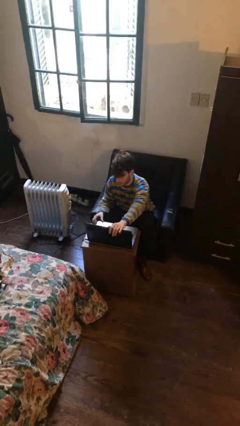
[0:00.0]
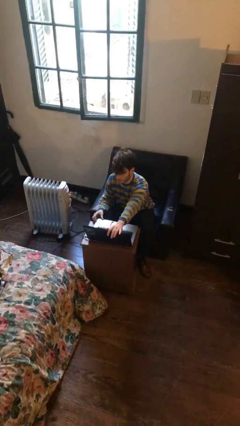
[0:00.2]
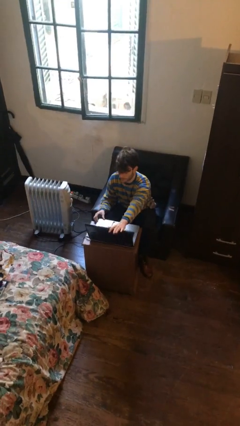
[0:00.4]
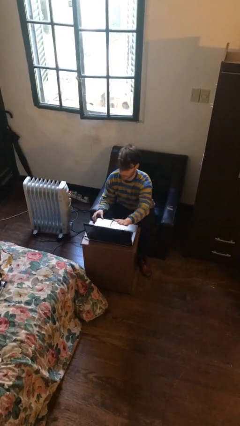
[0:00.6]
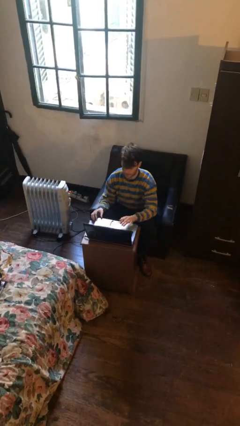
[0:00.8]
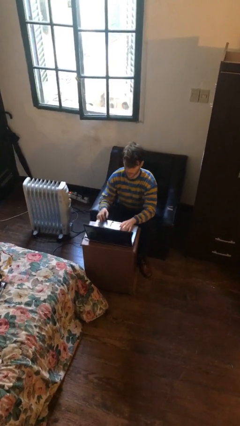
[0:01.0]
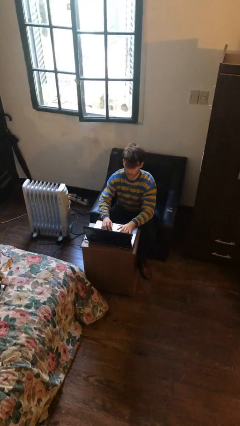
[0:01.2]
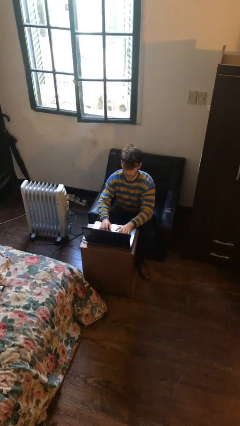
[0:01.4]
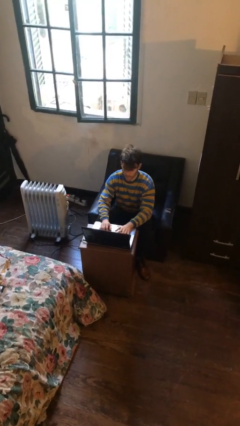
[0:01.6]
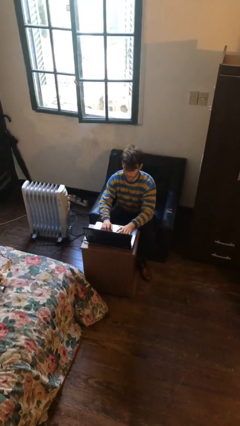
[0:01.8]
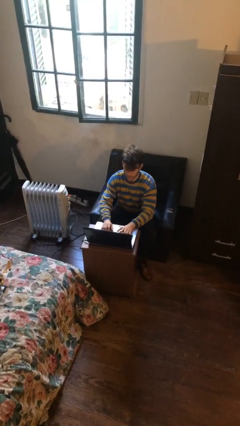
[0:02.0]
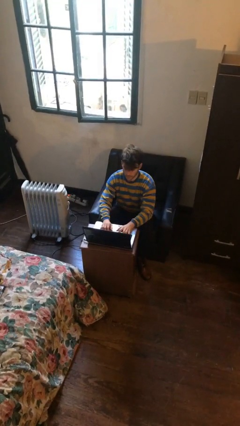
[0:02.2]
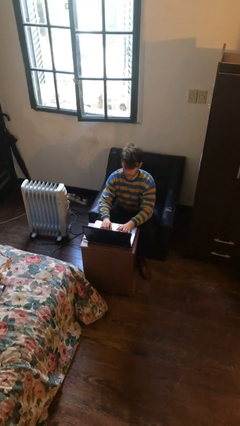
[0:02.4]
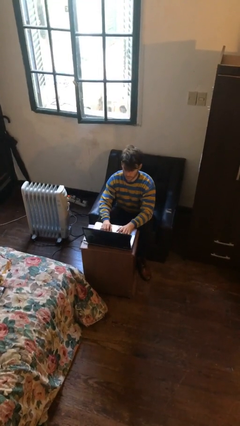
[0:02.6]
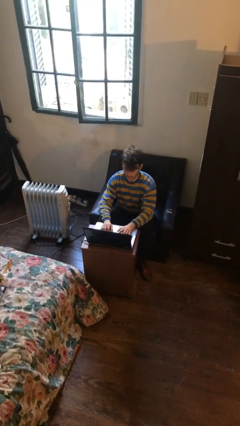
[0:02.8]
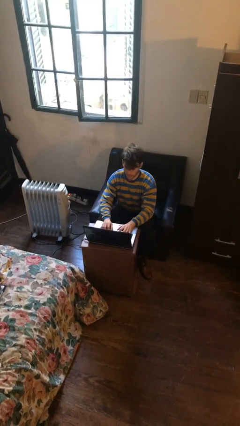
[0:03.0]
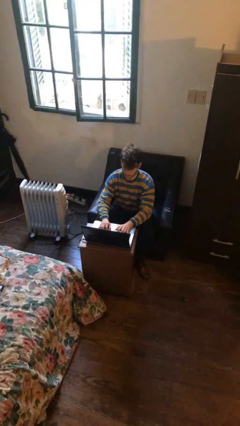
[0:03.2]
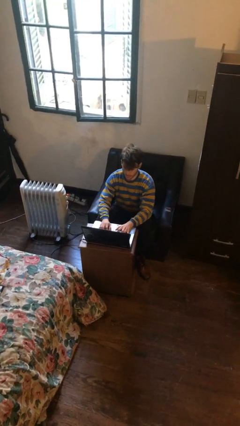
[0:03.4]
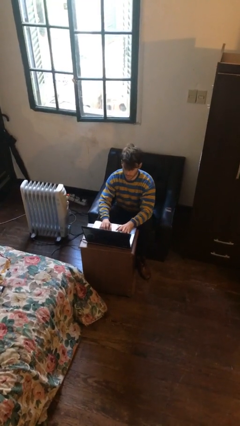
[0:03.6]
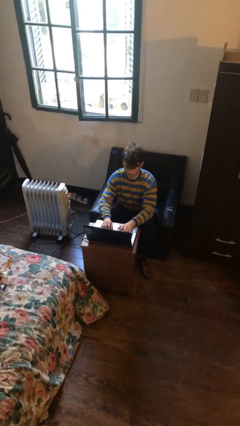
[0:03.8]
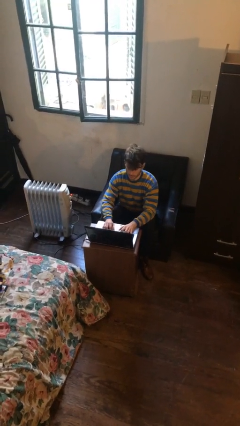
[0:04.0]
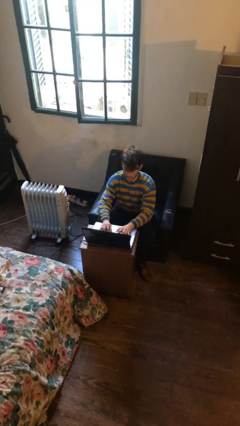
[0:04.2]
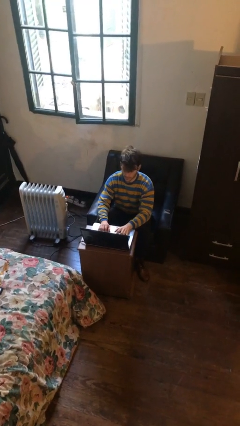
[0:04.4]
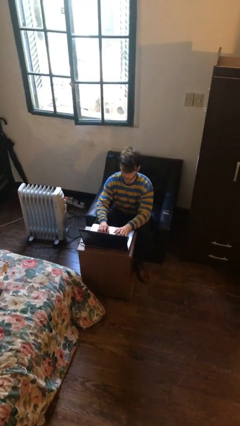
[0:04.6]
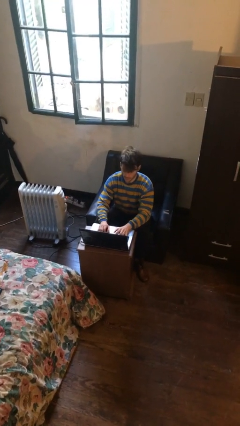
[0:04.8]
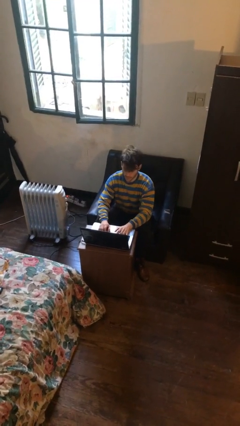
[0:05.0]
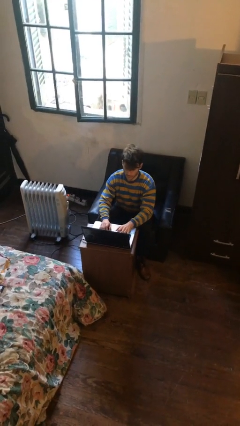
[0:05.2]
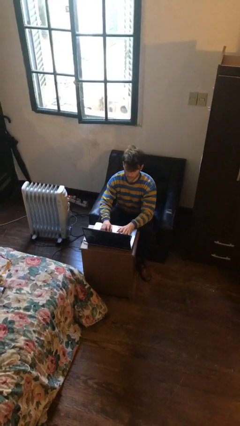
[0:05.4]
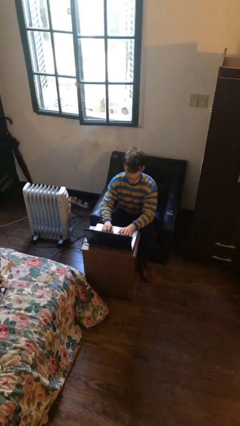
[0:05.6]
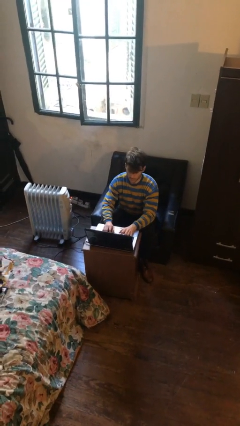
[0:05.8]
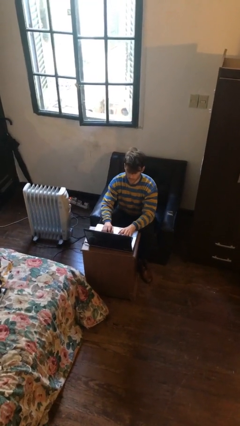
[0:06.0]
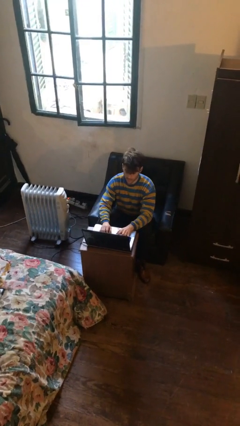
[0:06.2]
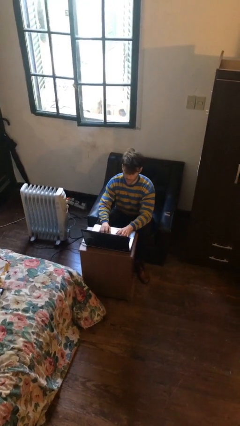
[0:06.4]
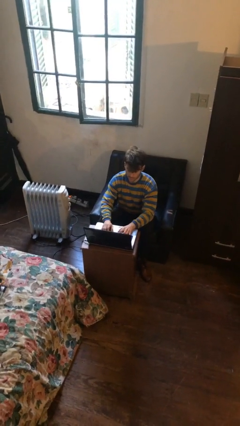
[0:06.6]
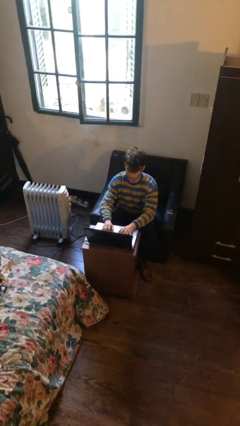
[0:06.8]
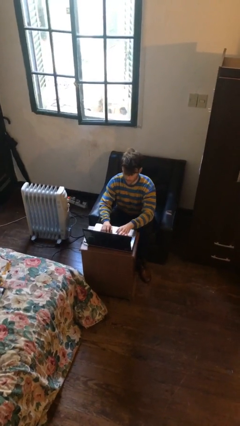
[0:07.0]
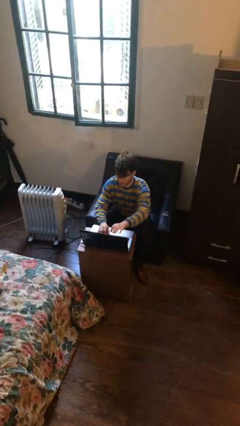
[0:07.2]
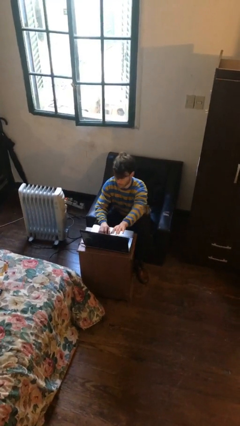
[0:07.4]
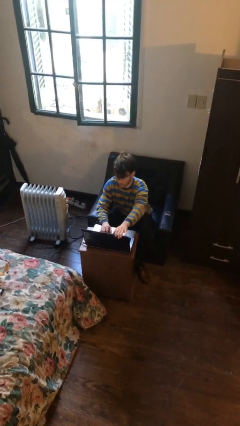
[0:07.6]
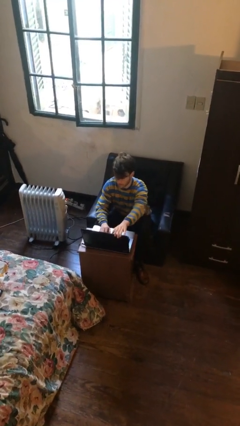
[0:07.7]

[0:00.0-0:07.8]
person interacts with laptop

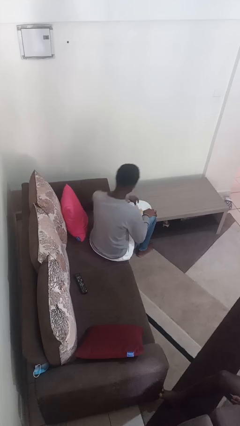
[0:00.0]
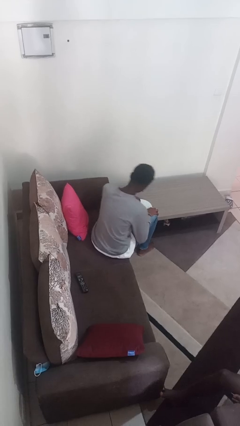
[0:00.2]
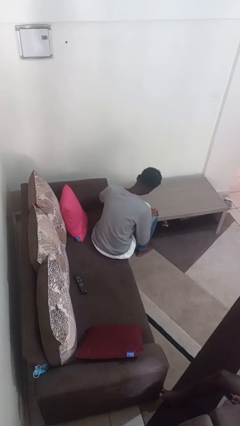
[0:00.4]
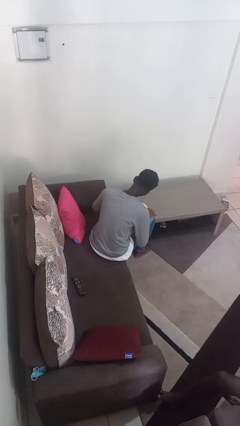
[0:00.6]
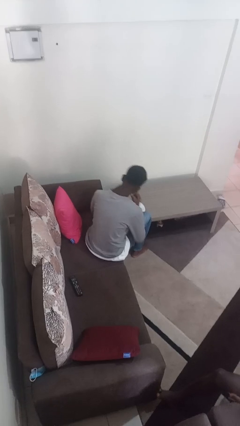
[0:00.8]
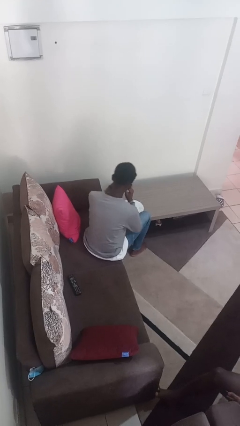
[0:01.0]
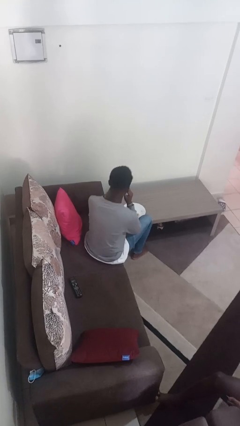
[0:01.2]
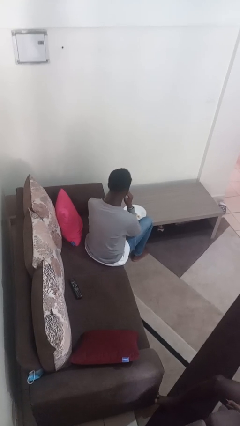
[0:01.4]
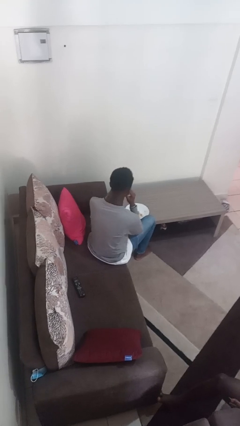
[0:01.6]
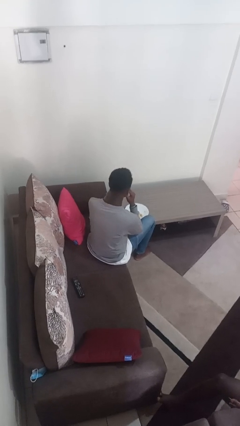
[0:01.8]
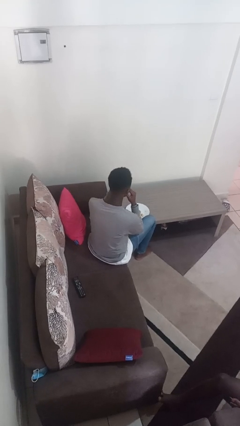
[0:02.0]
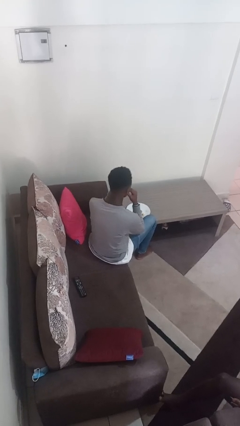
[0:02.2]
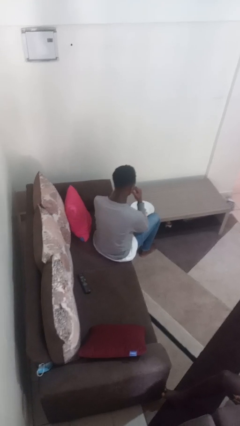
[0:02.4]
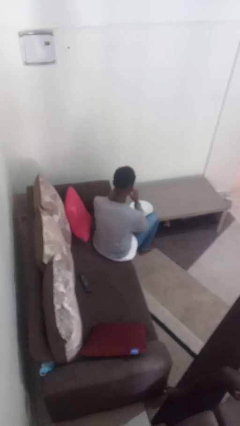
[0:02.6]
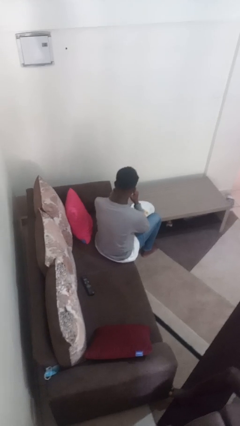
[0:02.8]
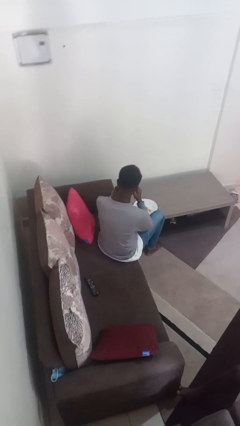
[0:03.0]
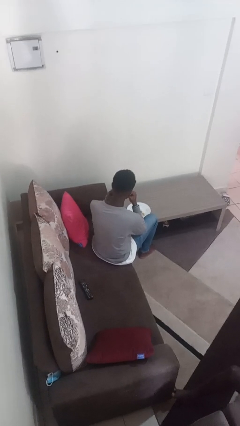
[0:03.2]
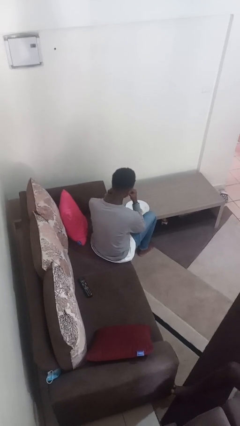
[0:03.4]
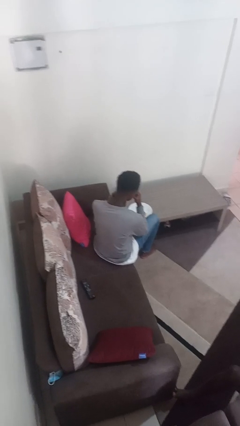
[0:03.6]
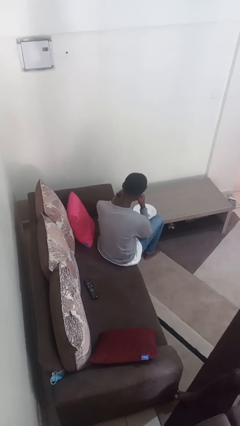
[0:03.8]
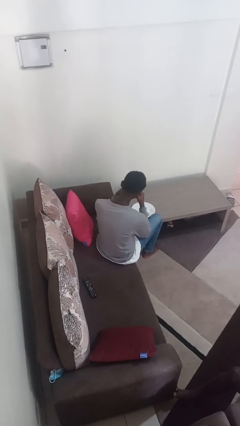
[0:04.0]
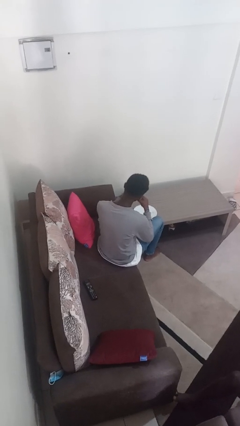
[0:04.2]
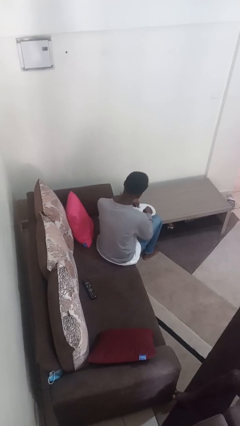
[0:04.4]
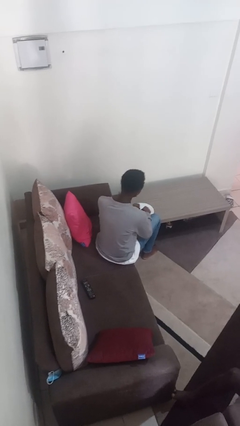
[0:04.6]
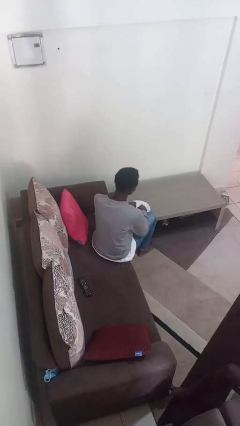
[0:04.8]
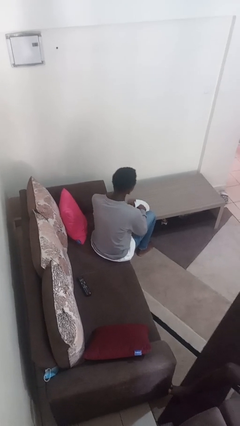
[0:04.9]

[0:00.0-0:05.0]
person eats with hands

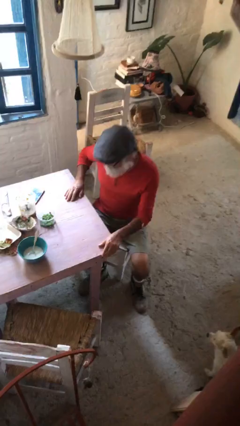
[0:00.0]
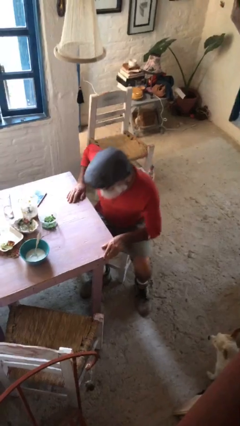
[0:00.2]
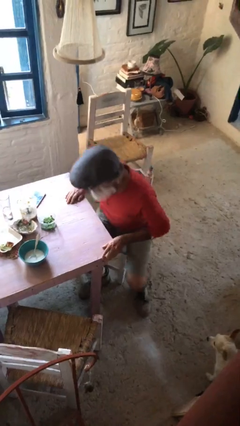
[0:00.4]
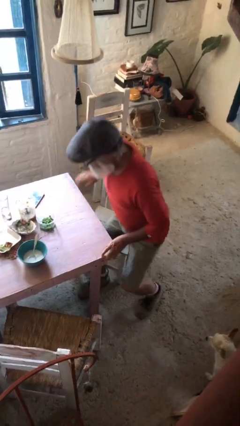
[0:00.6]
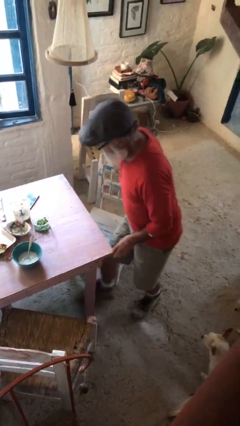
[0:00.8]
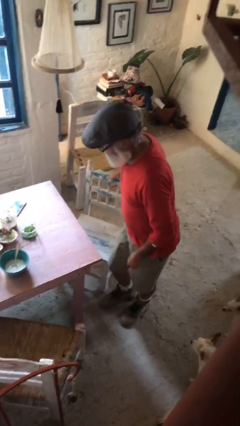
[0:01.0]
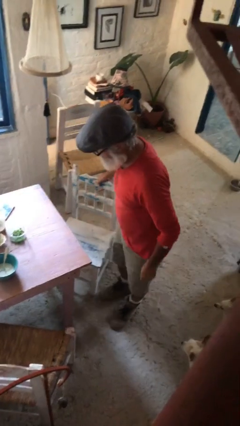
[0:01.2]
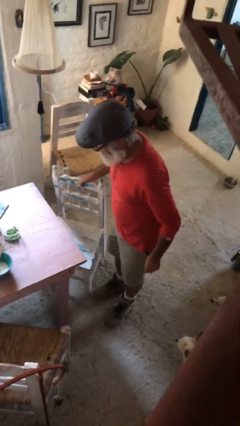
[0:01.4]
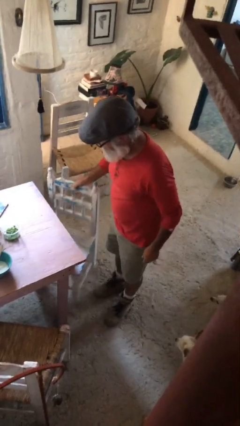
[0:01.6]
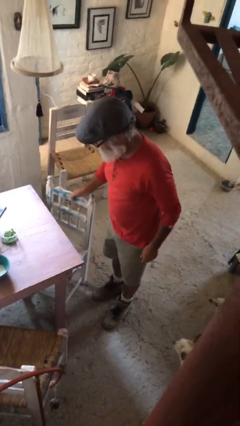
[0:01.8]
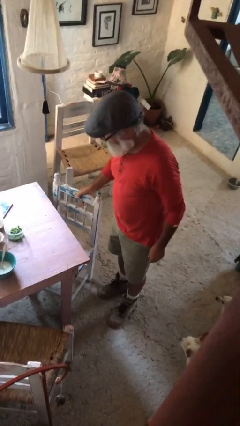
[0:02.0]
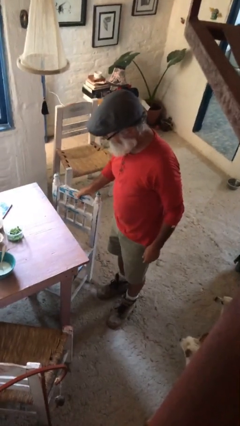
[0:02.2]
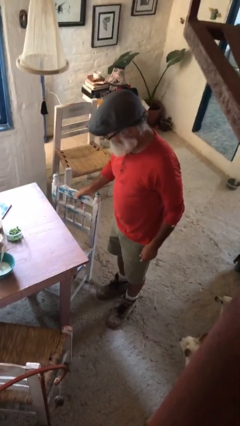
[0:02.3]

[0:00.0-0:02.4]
person stands up

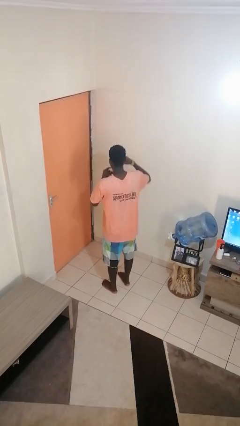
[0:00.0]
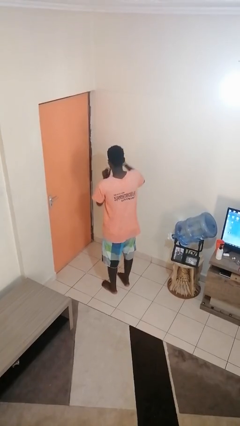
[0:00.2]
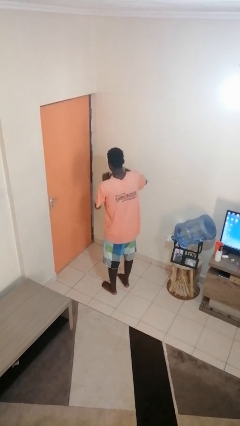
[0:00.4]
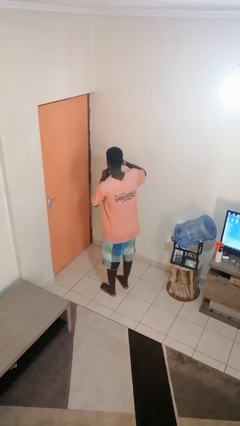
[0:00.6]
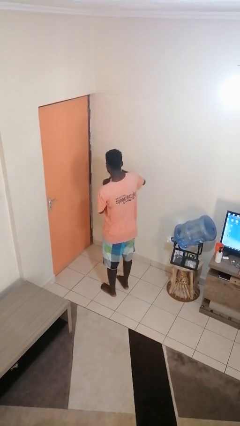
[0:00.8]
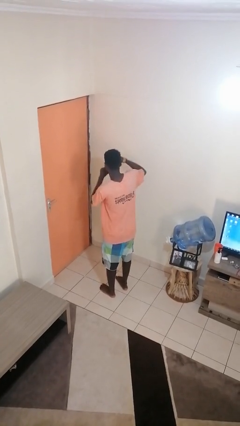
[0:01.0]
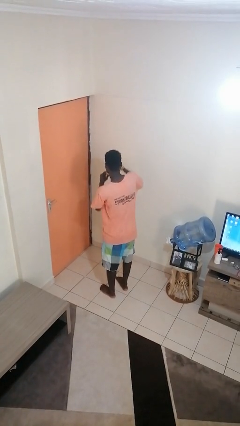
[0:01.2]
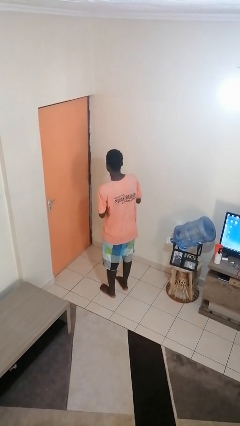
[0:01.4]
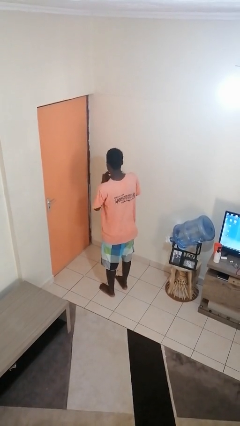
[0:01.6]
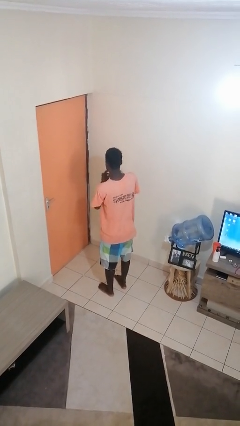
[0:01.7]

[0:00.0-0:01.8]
person snaps fingers

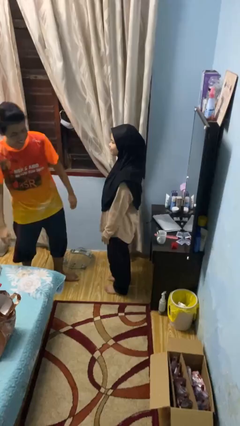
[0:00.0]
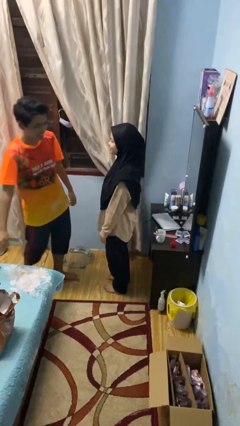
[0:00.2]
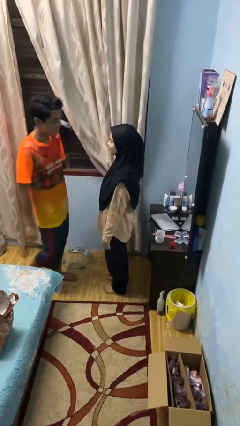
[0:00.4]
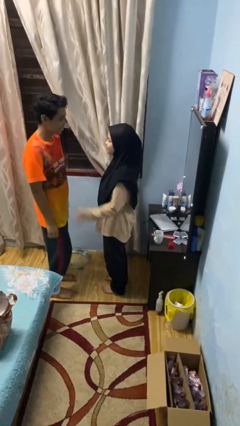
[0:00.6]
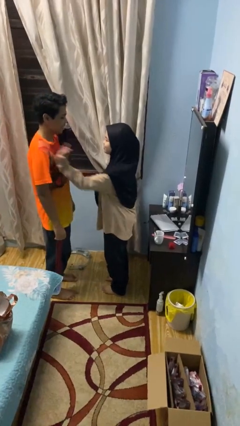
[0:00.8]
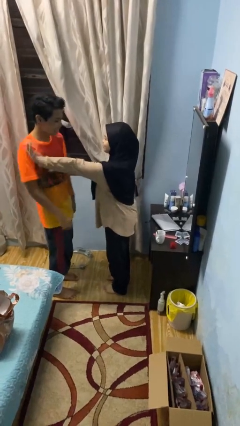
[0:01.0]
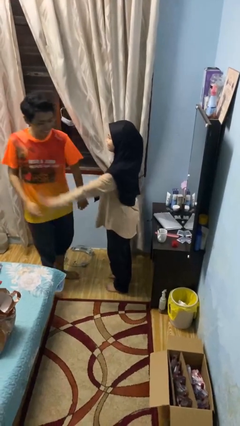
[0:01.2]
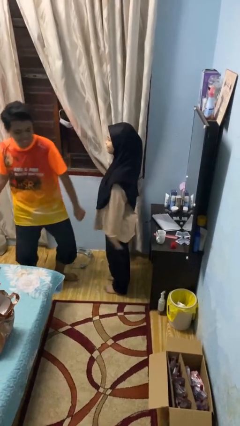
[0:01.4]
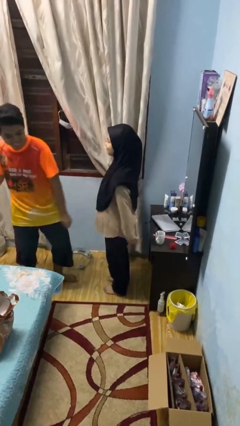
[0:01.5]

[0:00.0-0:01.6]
person shoves person
